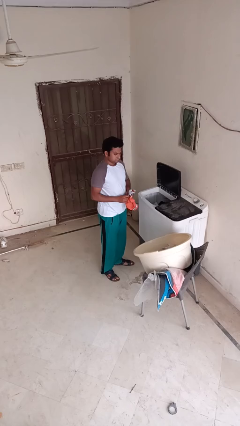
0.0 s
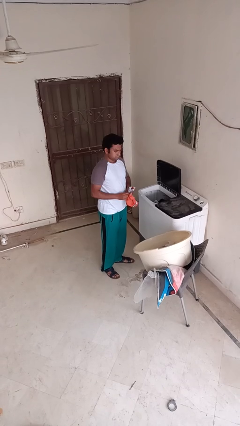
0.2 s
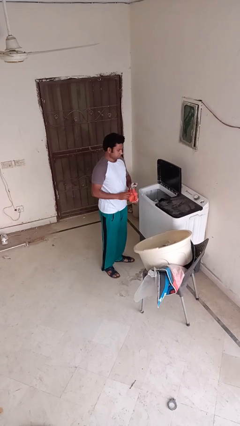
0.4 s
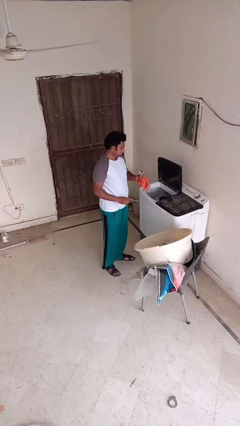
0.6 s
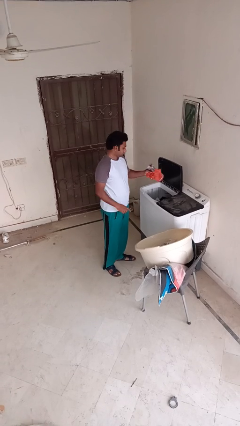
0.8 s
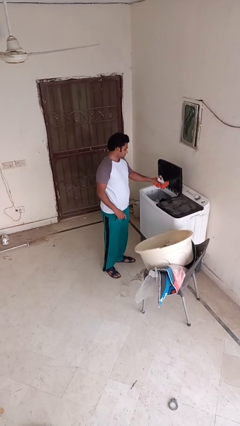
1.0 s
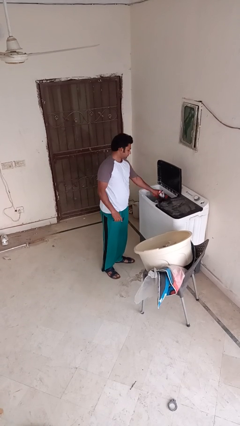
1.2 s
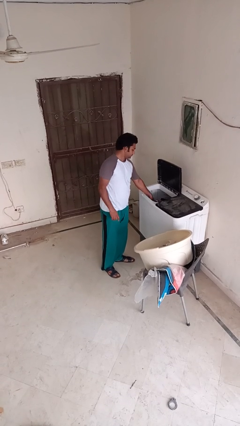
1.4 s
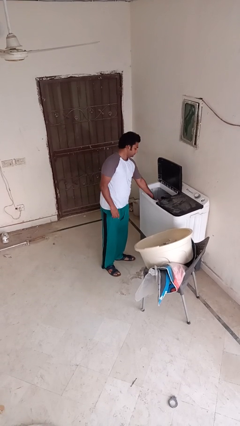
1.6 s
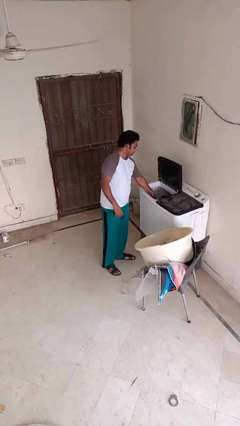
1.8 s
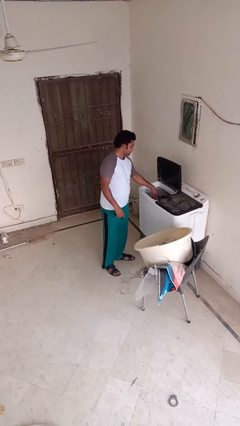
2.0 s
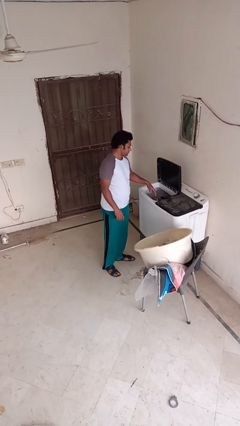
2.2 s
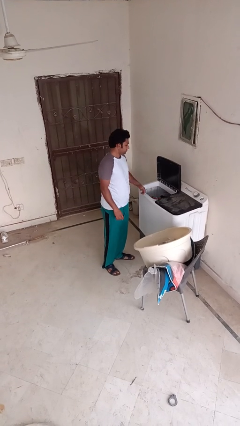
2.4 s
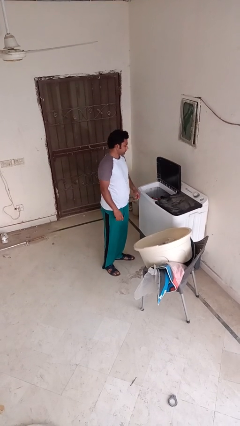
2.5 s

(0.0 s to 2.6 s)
person loads clotheswasher

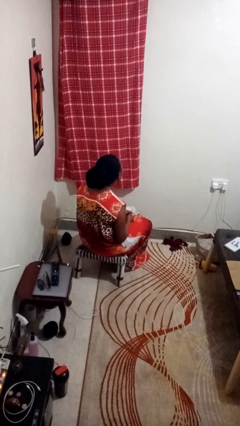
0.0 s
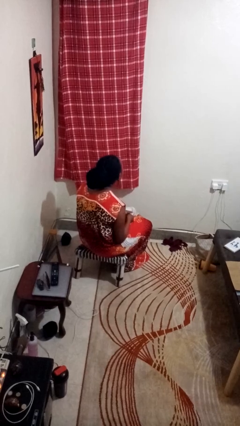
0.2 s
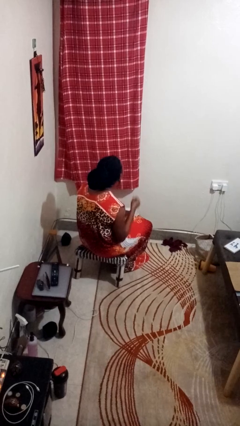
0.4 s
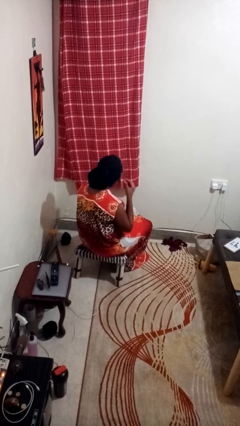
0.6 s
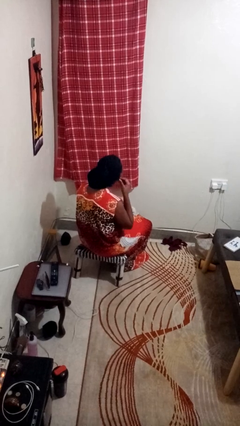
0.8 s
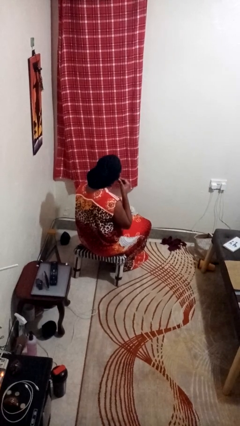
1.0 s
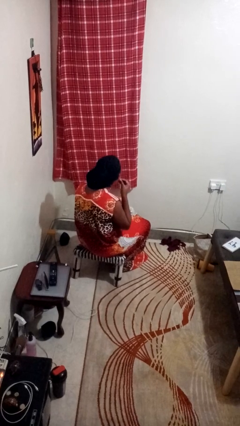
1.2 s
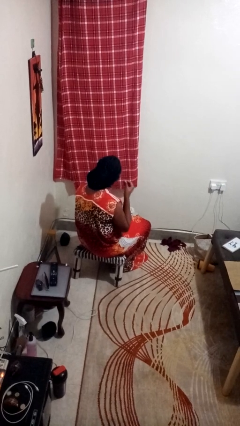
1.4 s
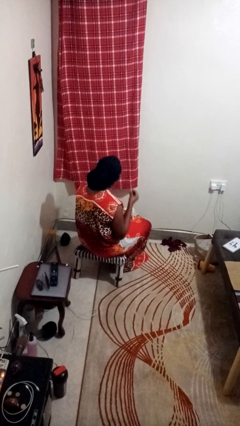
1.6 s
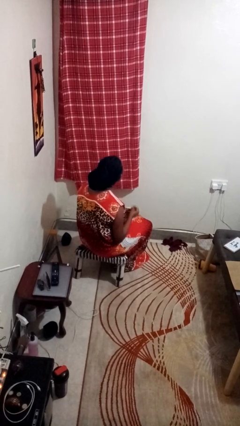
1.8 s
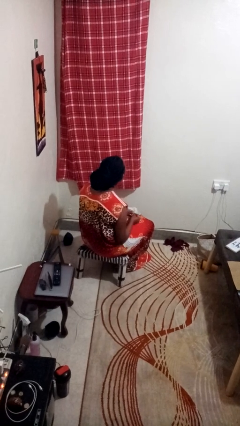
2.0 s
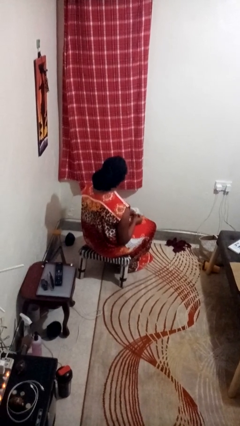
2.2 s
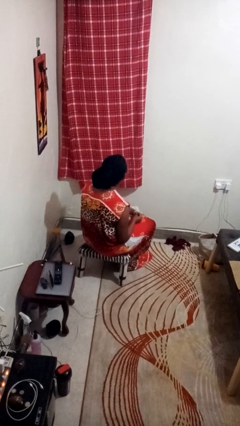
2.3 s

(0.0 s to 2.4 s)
person takes off earrings

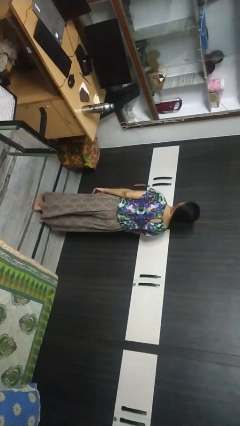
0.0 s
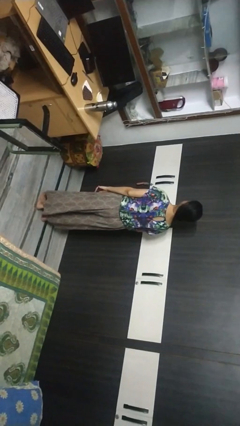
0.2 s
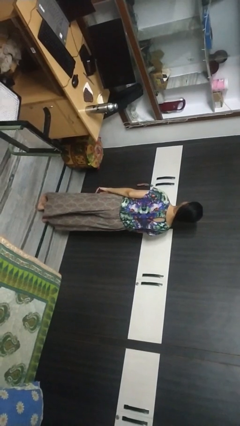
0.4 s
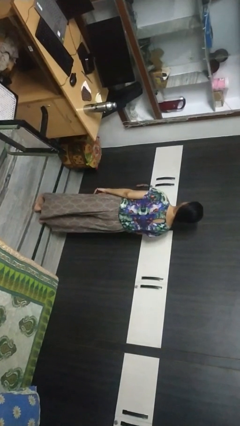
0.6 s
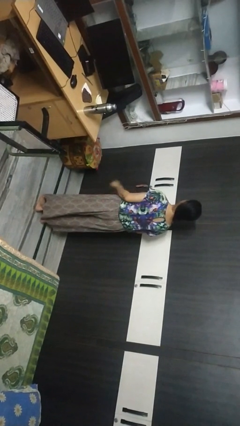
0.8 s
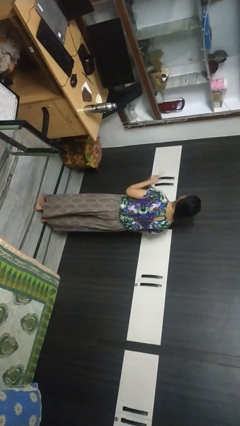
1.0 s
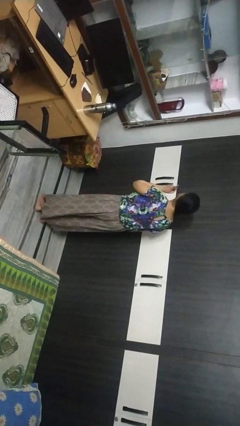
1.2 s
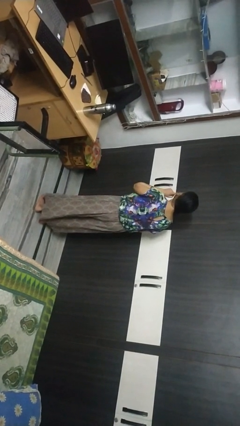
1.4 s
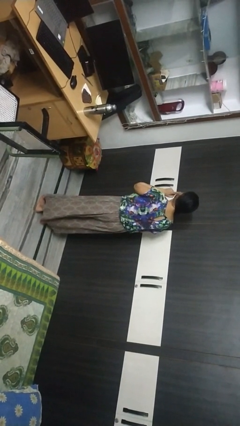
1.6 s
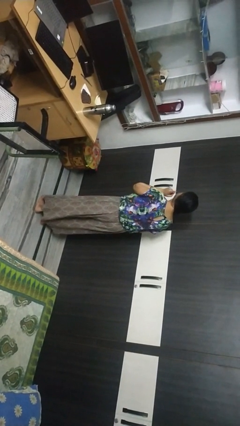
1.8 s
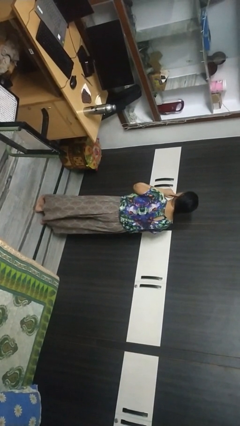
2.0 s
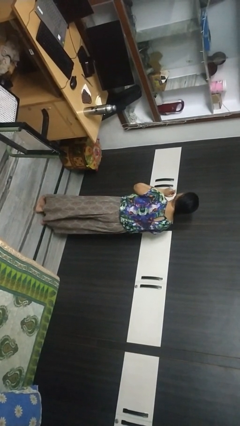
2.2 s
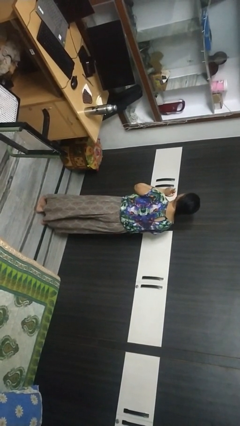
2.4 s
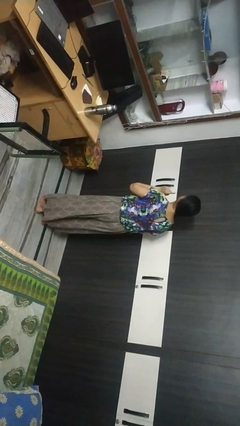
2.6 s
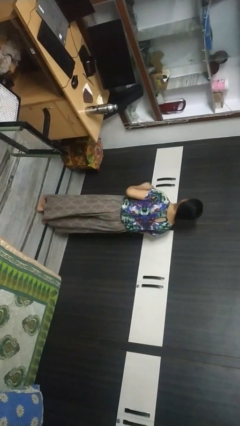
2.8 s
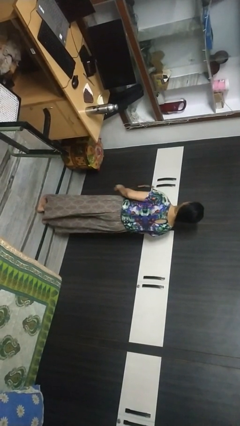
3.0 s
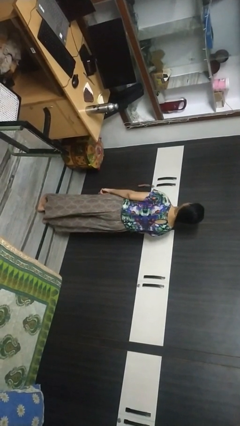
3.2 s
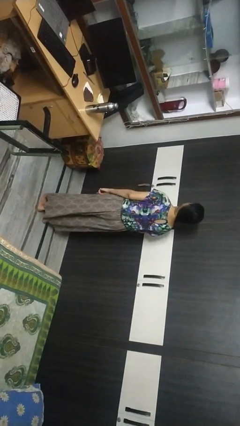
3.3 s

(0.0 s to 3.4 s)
person gestures listen closely

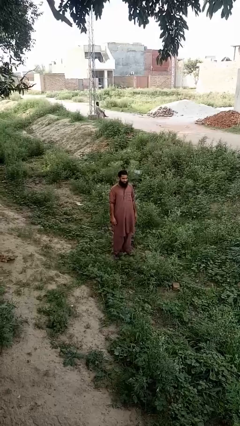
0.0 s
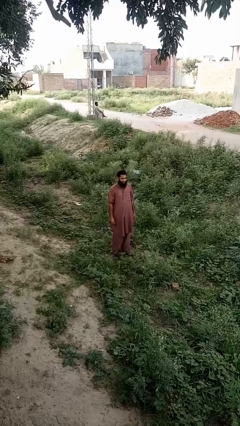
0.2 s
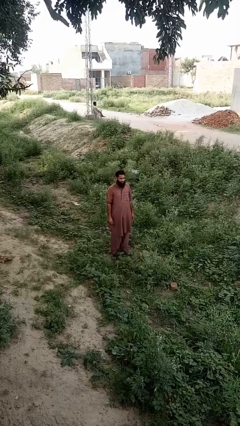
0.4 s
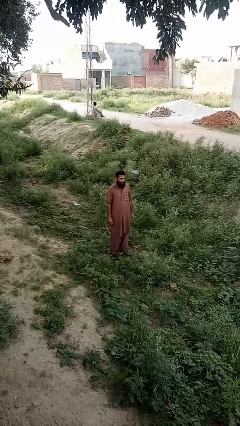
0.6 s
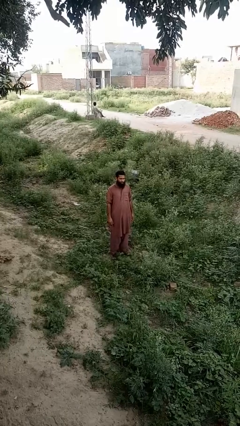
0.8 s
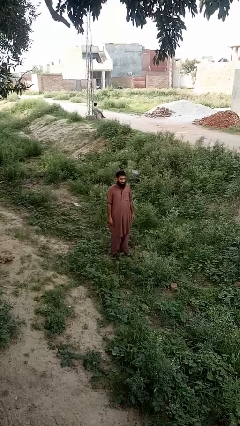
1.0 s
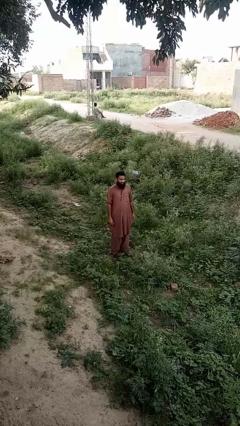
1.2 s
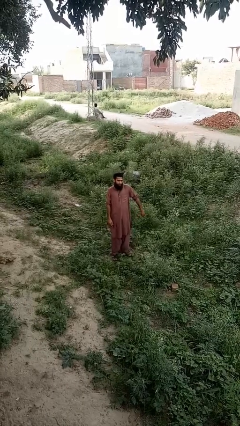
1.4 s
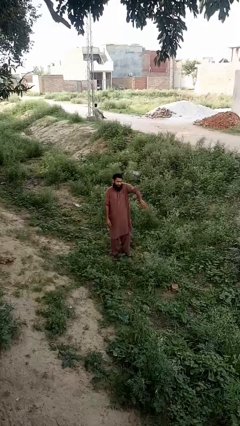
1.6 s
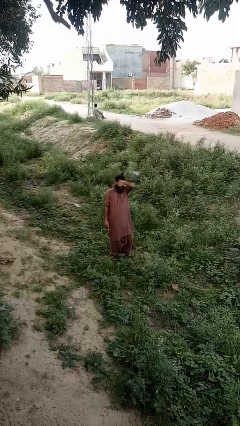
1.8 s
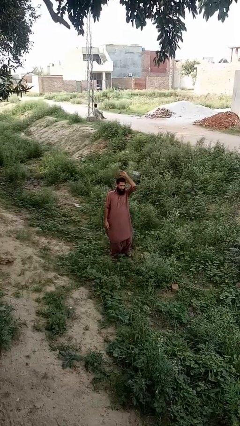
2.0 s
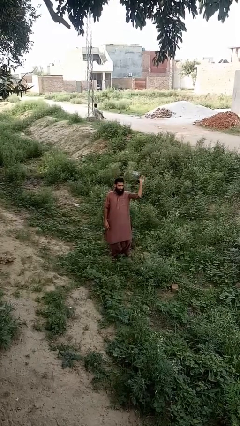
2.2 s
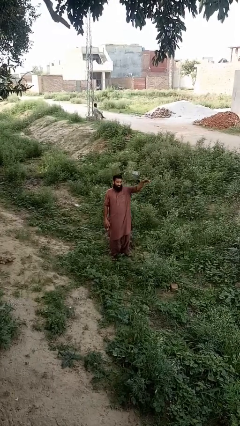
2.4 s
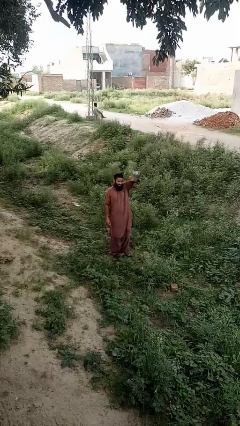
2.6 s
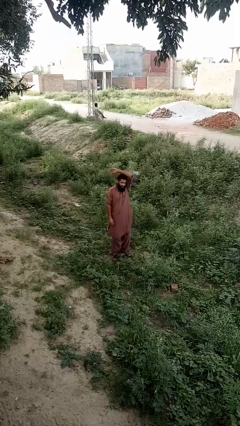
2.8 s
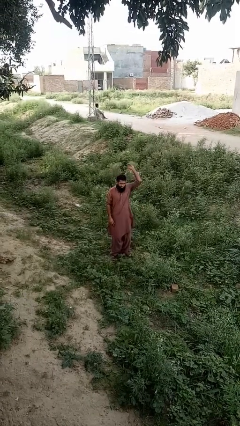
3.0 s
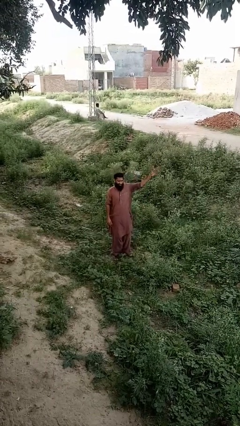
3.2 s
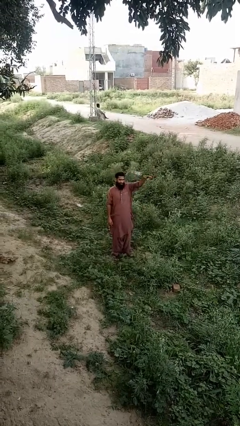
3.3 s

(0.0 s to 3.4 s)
person dances in place

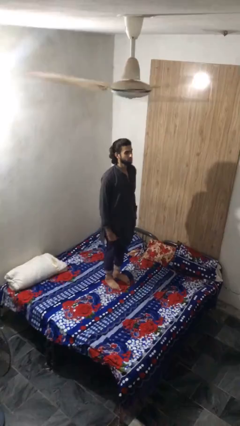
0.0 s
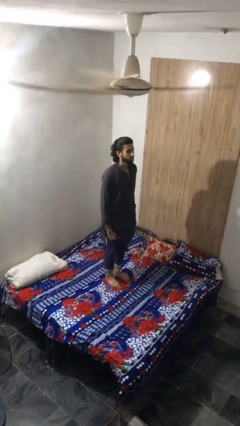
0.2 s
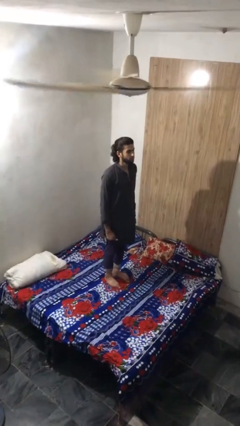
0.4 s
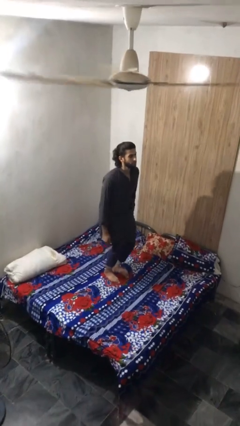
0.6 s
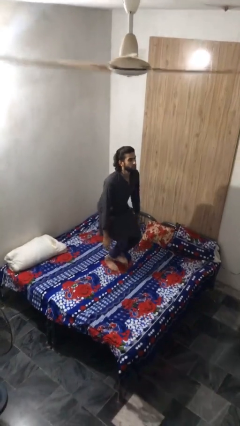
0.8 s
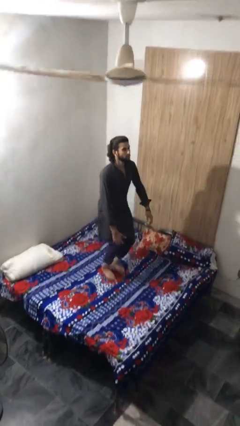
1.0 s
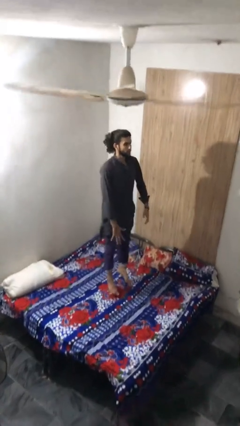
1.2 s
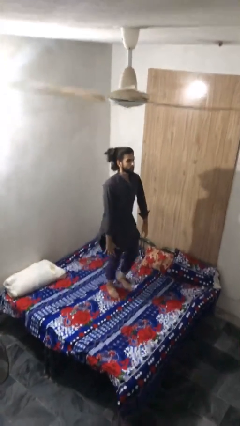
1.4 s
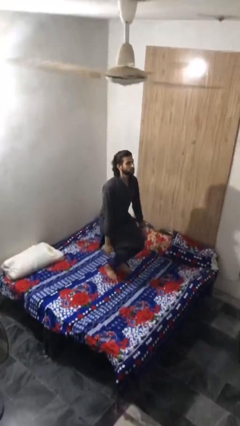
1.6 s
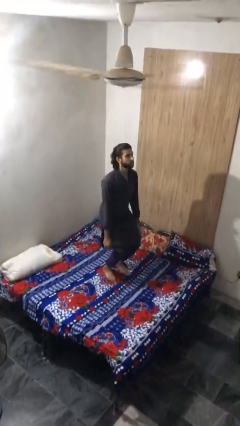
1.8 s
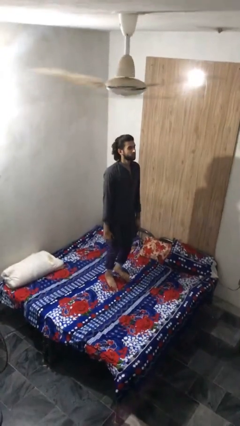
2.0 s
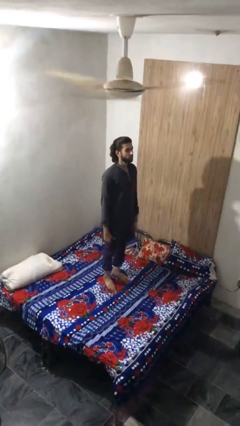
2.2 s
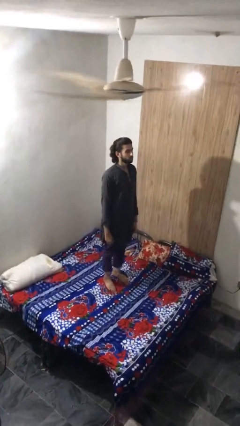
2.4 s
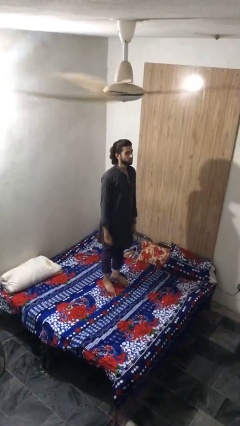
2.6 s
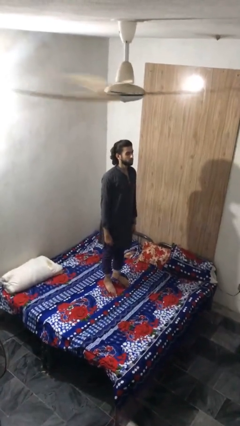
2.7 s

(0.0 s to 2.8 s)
person jumps on bed

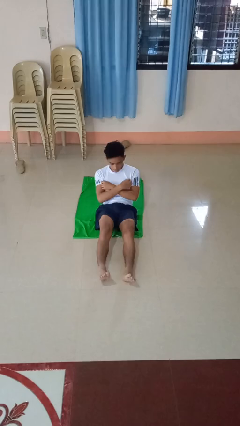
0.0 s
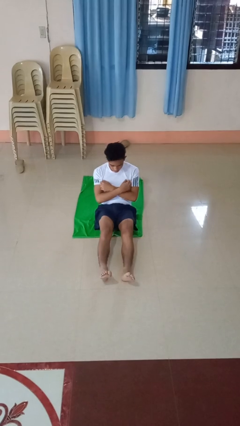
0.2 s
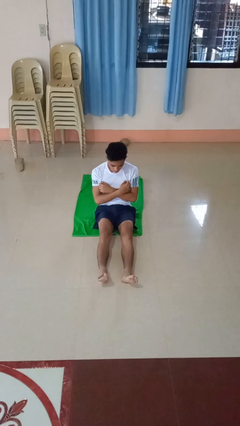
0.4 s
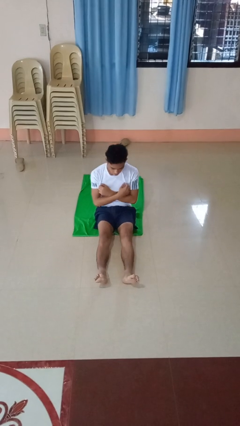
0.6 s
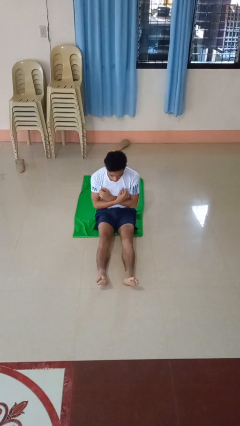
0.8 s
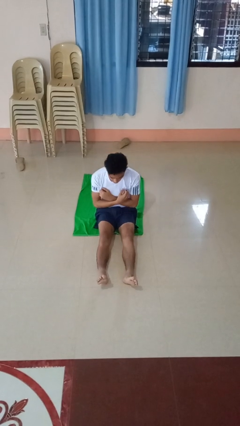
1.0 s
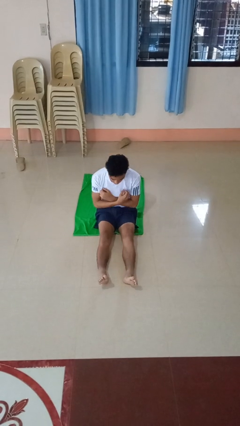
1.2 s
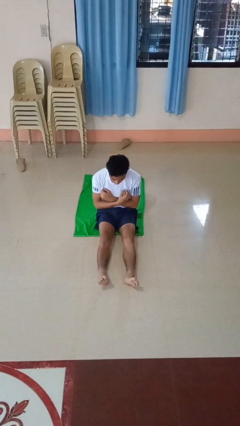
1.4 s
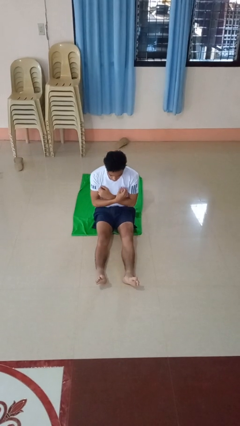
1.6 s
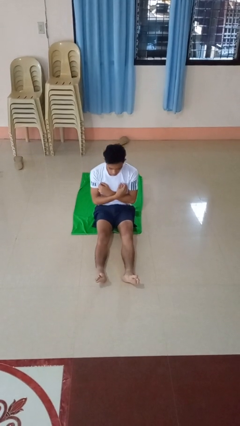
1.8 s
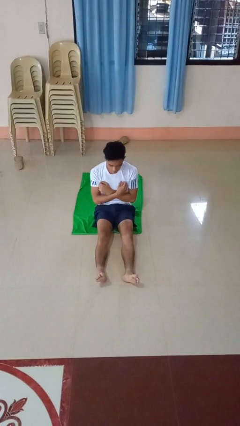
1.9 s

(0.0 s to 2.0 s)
person exercises with situp

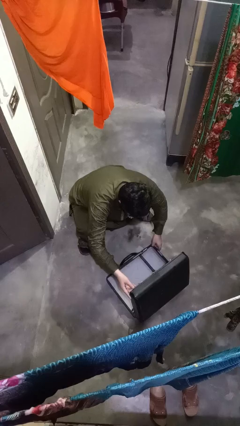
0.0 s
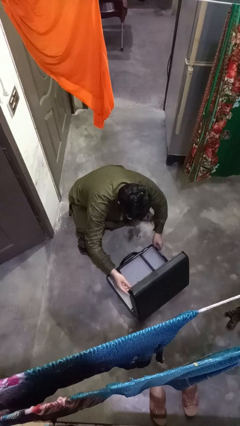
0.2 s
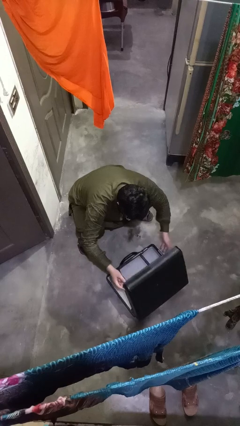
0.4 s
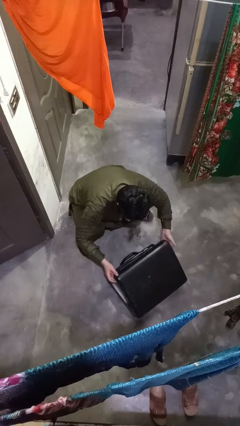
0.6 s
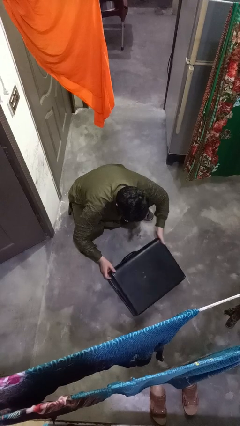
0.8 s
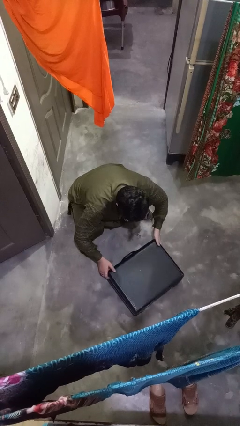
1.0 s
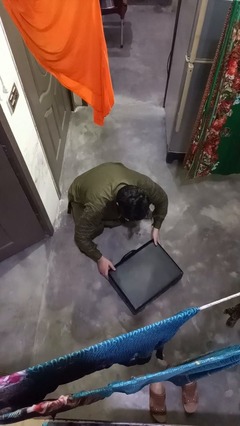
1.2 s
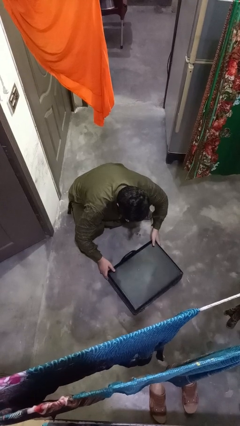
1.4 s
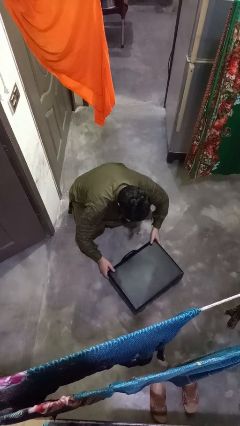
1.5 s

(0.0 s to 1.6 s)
person closes suitcase
